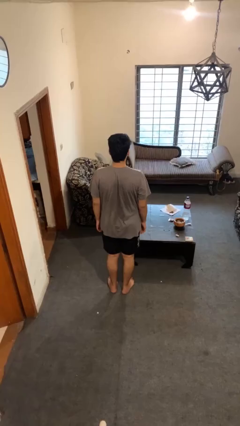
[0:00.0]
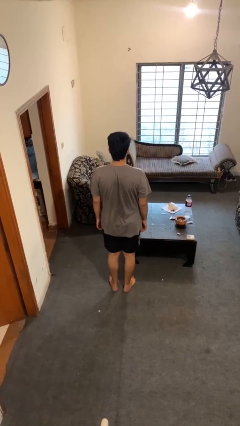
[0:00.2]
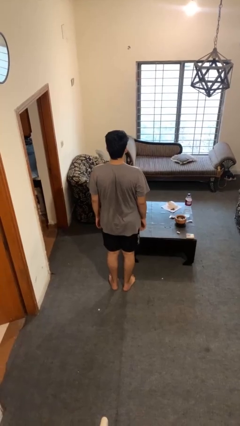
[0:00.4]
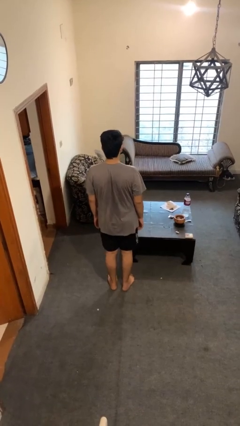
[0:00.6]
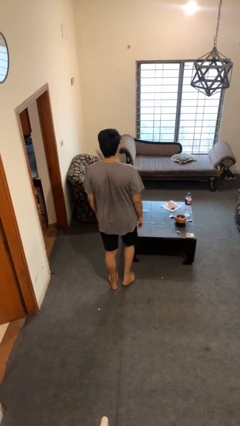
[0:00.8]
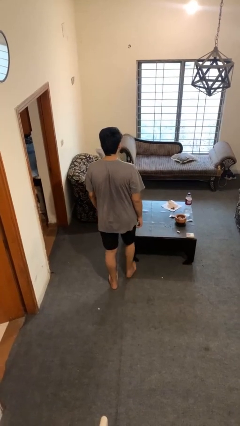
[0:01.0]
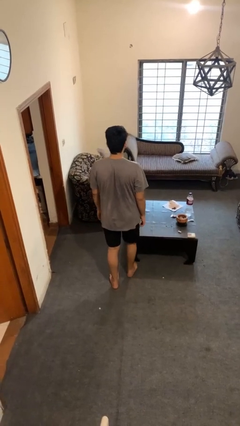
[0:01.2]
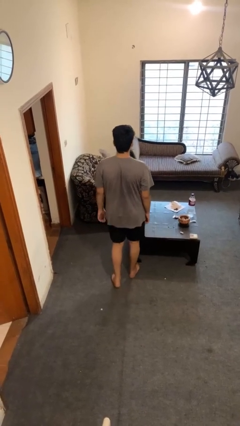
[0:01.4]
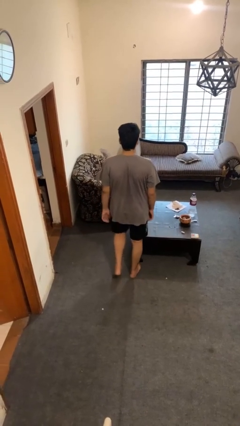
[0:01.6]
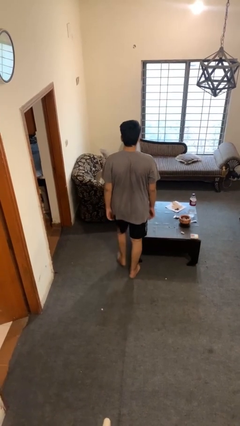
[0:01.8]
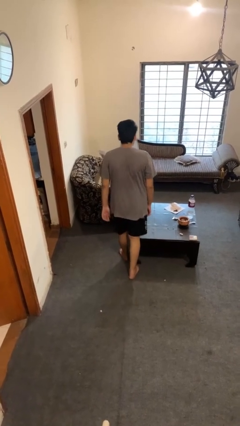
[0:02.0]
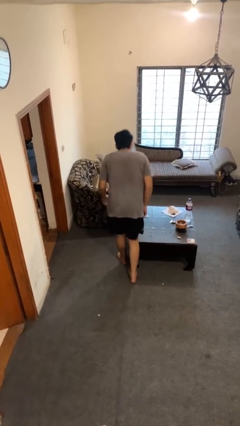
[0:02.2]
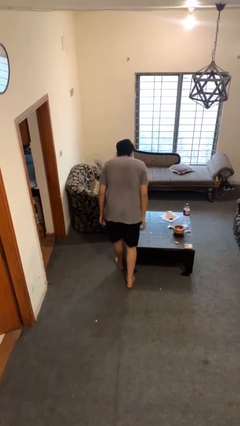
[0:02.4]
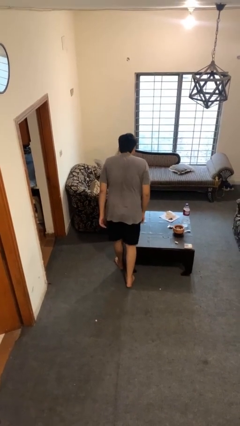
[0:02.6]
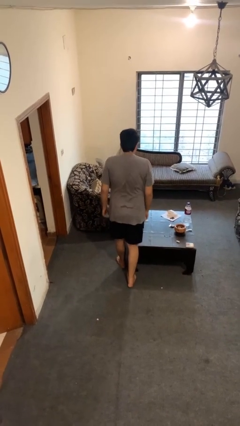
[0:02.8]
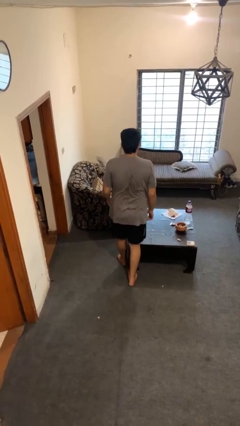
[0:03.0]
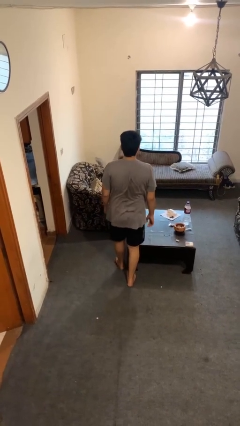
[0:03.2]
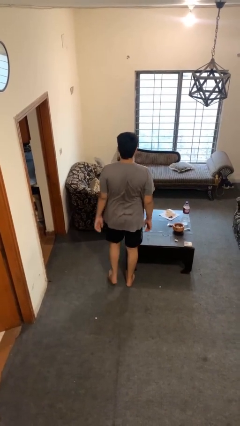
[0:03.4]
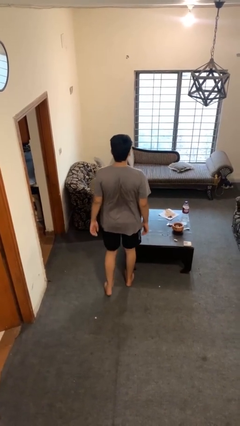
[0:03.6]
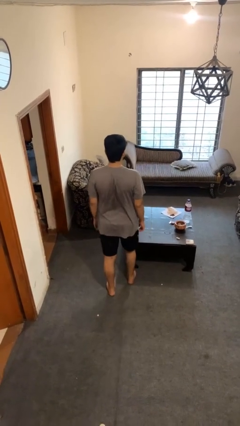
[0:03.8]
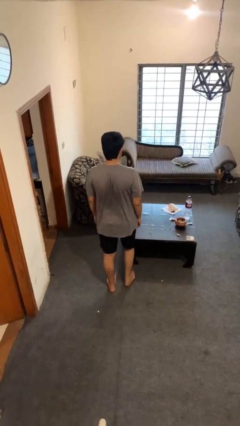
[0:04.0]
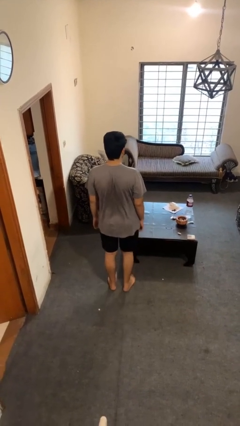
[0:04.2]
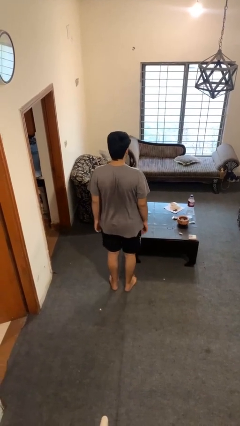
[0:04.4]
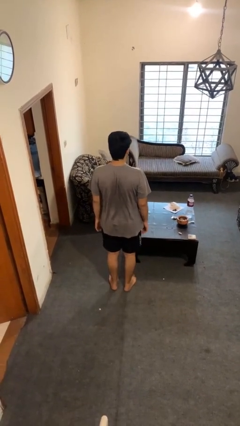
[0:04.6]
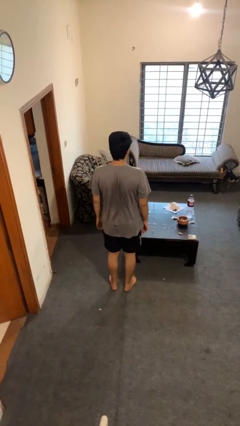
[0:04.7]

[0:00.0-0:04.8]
person bumps into table

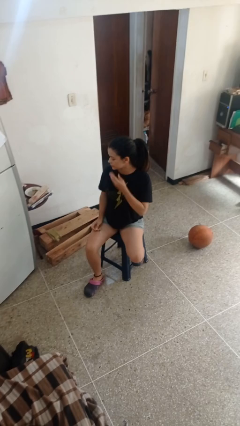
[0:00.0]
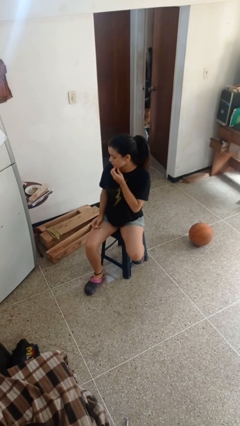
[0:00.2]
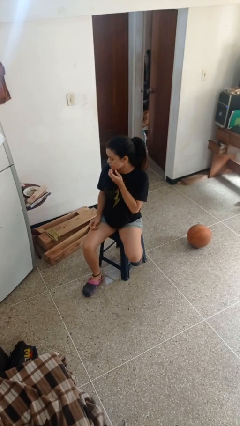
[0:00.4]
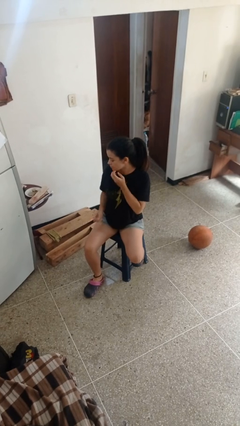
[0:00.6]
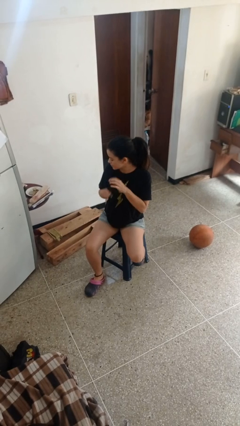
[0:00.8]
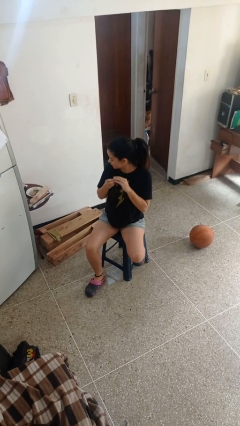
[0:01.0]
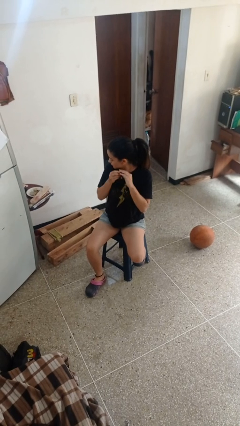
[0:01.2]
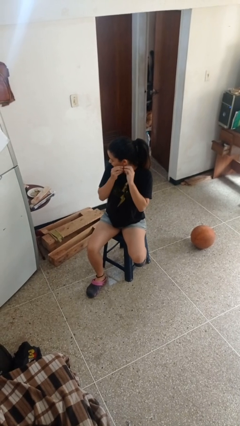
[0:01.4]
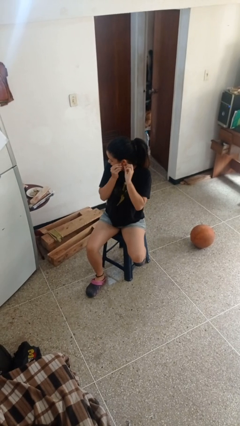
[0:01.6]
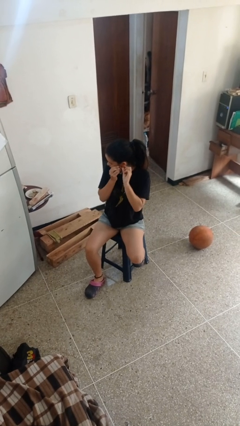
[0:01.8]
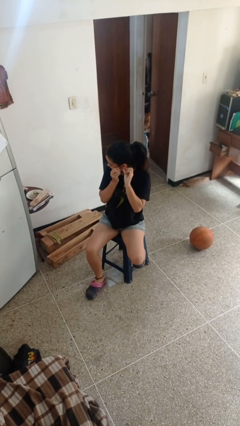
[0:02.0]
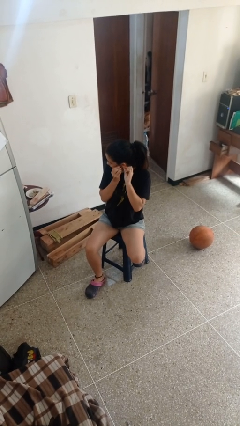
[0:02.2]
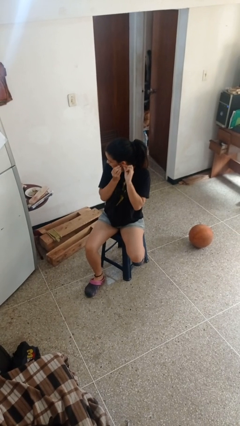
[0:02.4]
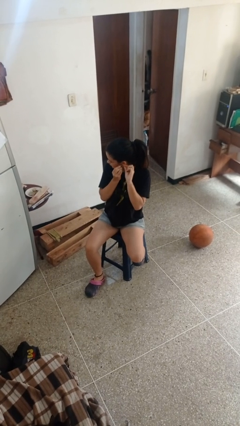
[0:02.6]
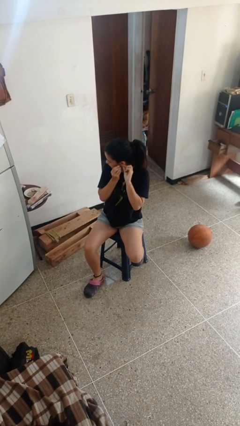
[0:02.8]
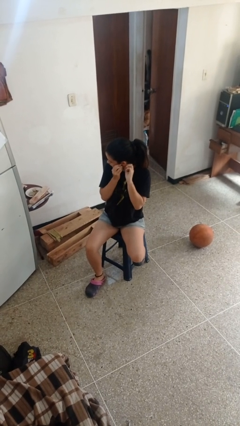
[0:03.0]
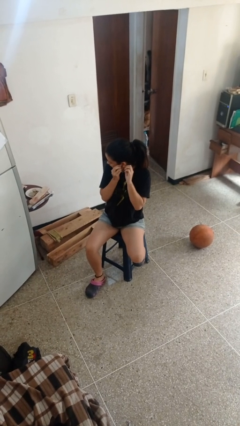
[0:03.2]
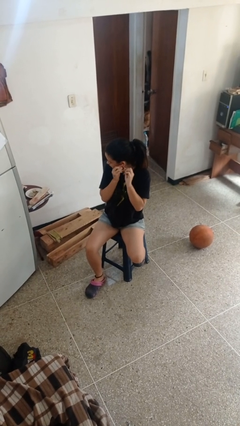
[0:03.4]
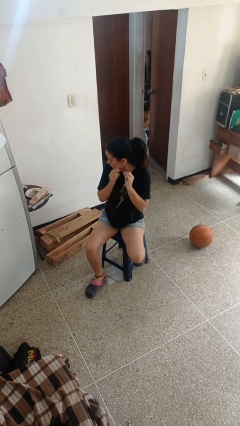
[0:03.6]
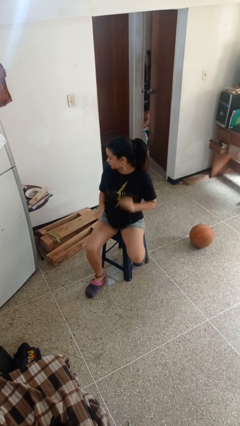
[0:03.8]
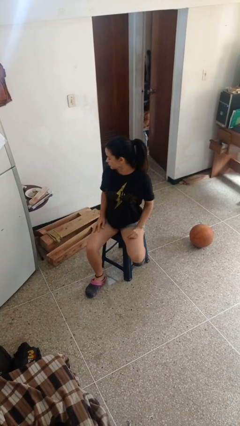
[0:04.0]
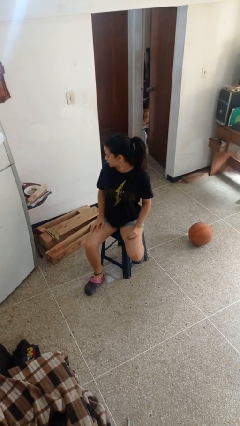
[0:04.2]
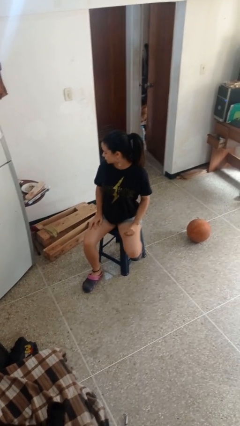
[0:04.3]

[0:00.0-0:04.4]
person puts on earrings

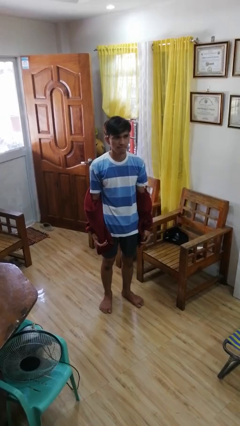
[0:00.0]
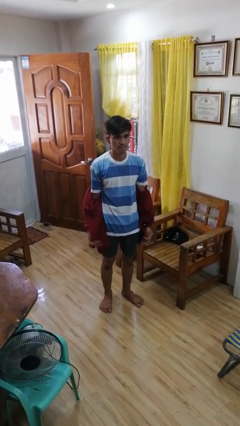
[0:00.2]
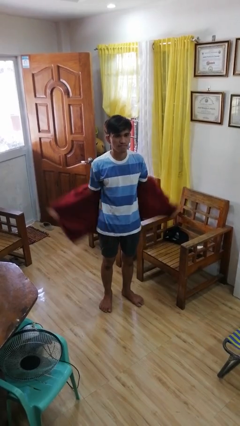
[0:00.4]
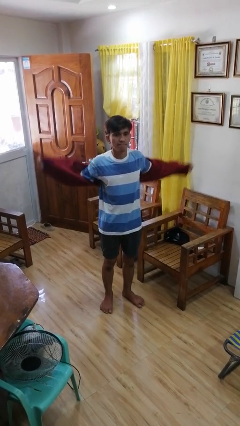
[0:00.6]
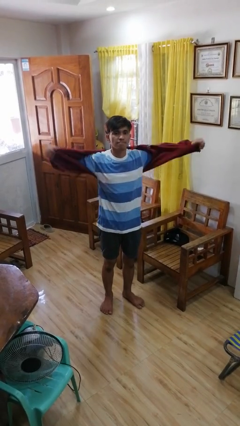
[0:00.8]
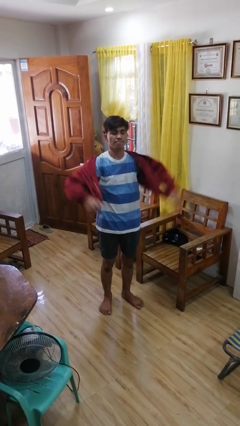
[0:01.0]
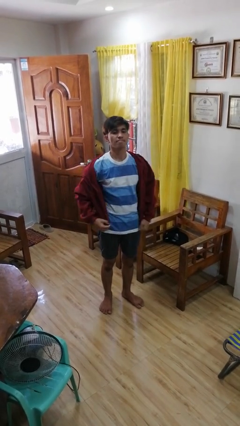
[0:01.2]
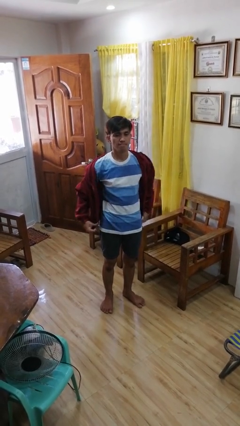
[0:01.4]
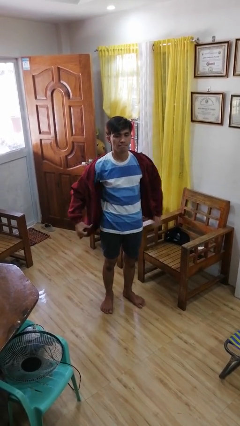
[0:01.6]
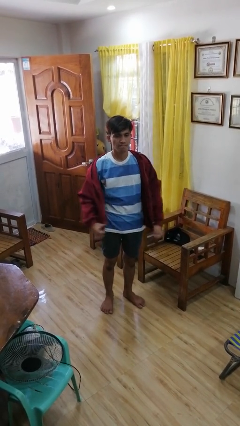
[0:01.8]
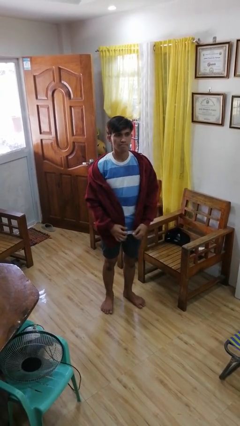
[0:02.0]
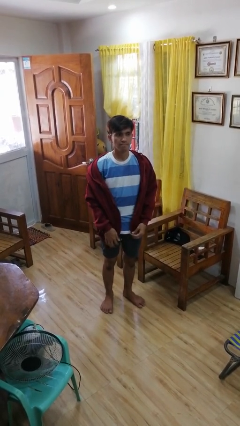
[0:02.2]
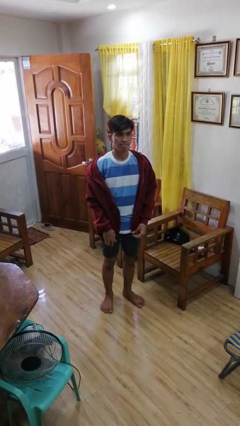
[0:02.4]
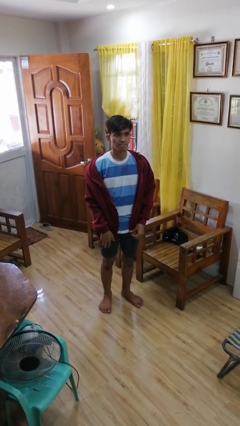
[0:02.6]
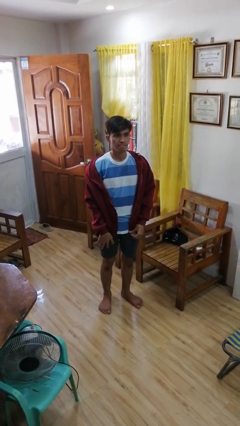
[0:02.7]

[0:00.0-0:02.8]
person puts on jacket

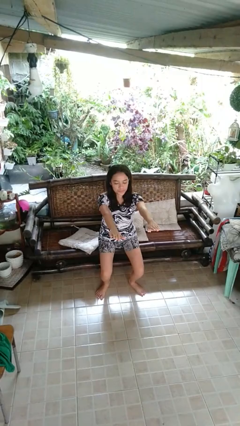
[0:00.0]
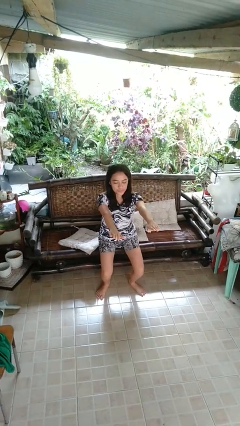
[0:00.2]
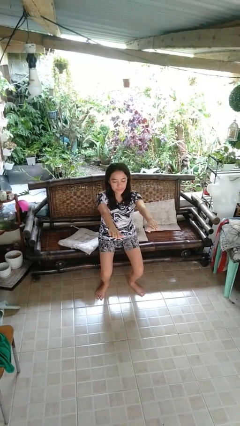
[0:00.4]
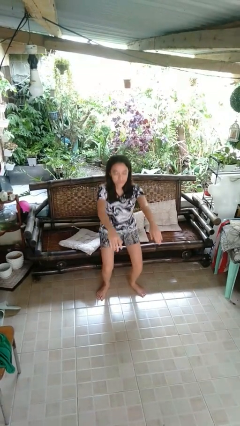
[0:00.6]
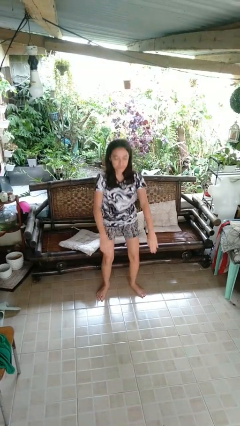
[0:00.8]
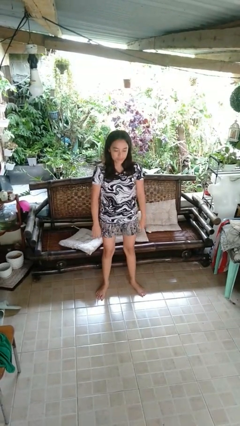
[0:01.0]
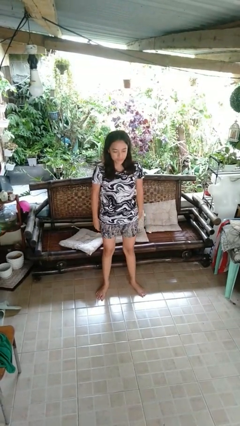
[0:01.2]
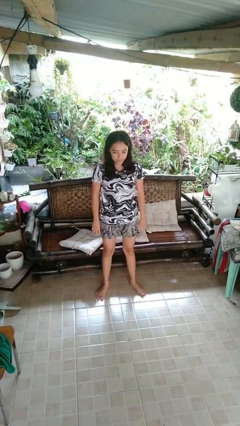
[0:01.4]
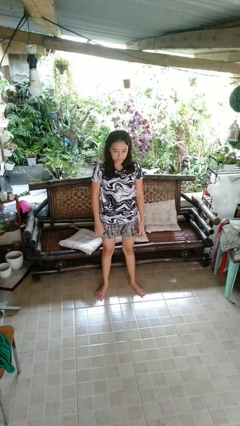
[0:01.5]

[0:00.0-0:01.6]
person stands up

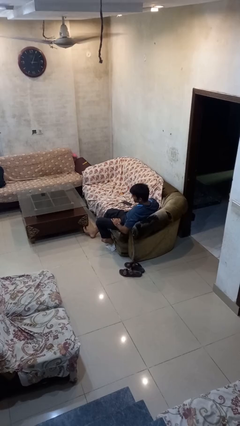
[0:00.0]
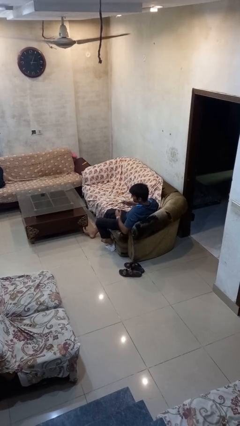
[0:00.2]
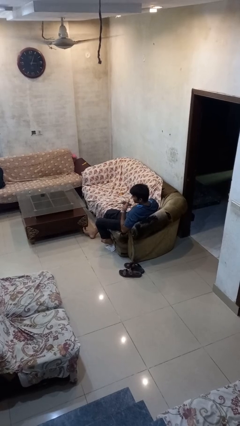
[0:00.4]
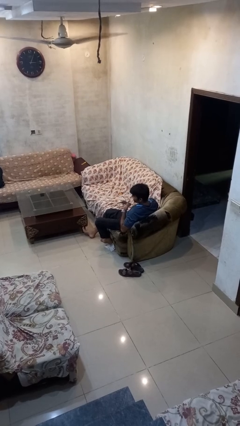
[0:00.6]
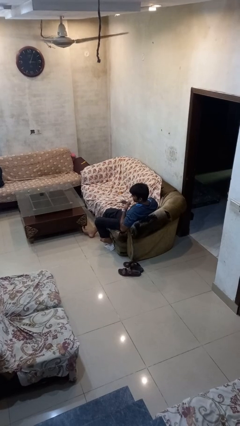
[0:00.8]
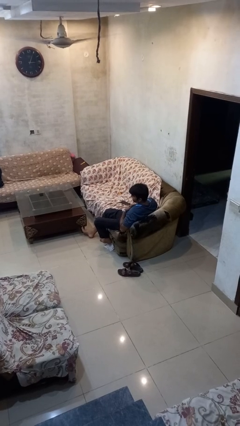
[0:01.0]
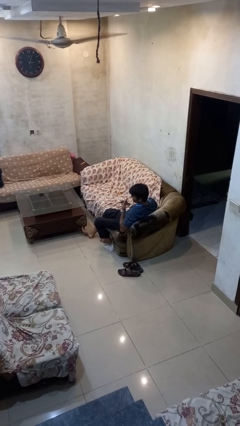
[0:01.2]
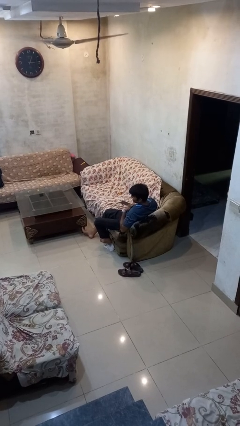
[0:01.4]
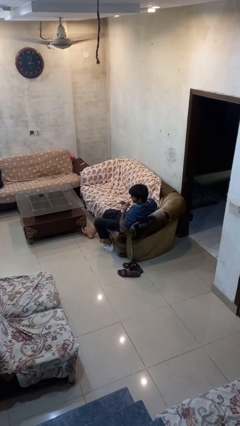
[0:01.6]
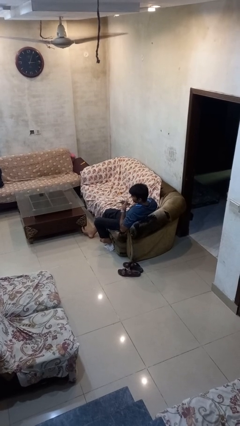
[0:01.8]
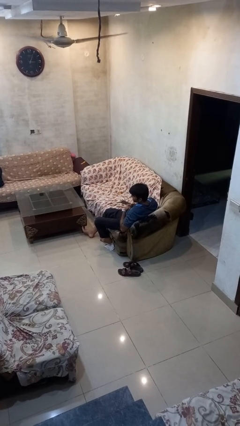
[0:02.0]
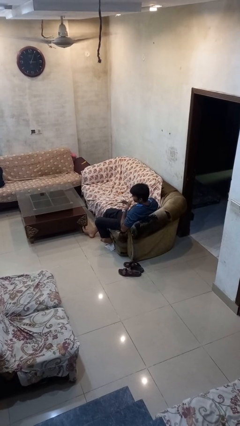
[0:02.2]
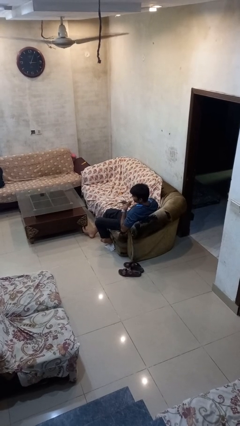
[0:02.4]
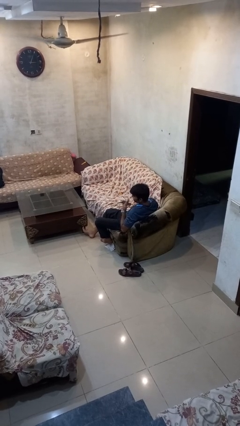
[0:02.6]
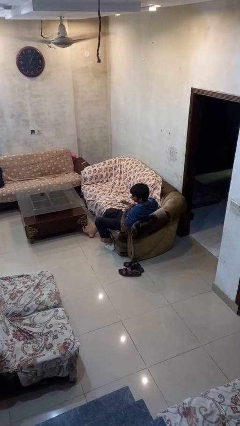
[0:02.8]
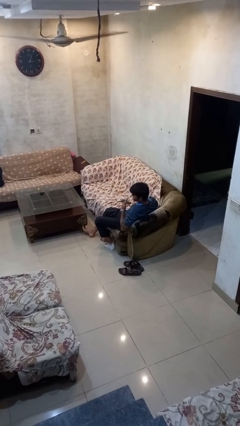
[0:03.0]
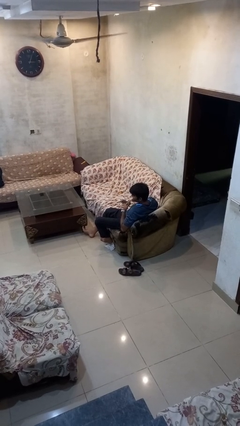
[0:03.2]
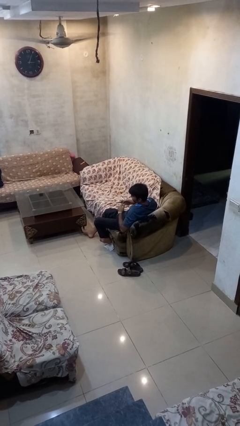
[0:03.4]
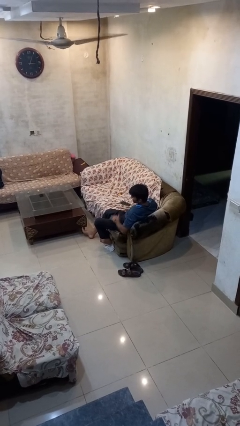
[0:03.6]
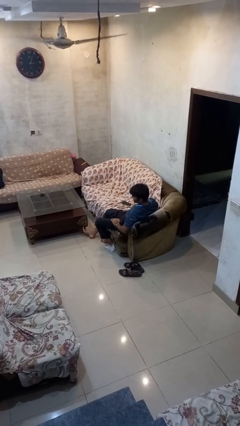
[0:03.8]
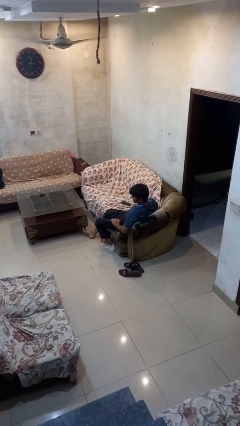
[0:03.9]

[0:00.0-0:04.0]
person drums on chest
